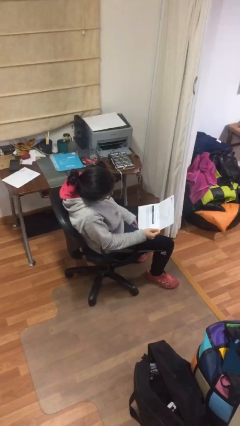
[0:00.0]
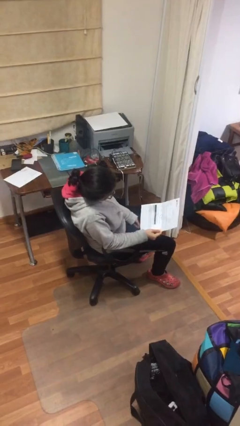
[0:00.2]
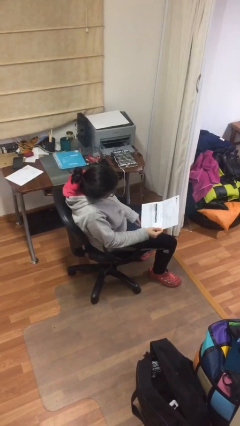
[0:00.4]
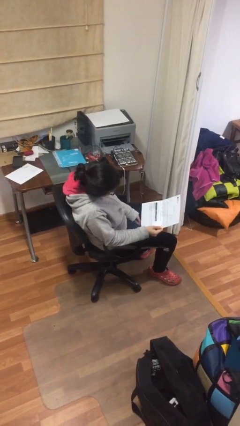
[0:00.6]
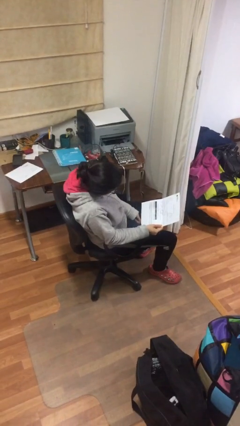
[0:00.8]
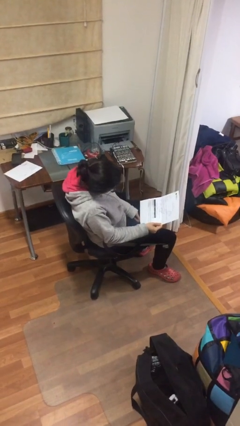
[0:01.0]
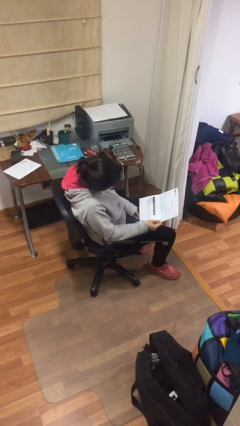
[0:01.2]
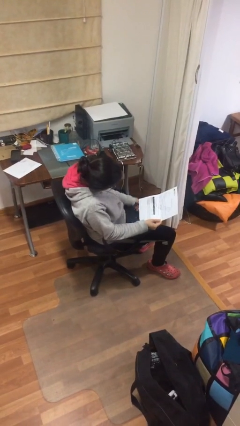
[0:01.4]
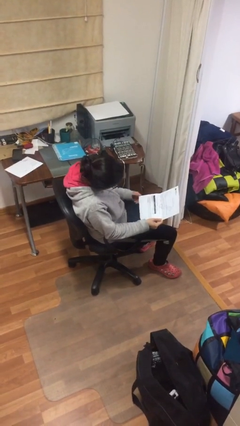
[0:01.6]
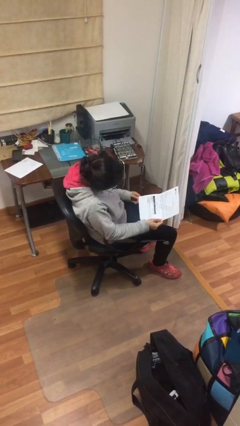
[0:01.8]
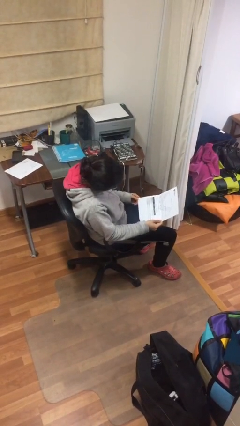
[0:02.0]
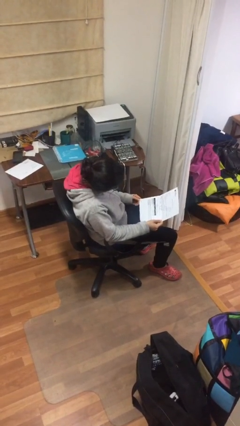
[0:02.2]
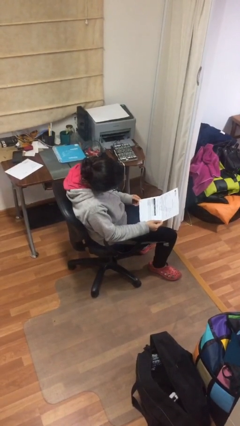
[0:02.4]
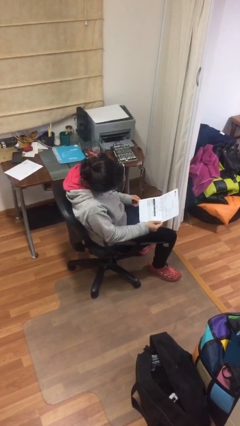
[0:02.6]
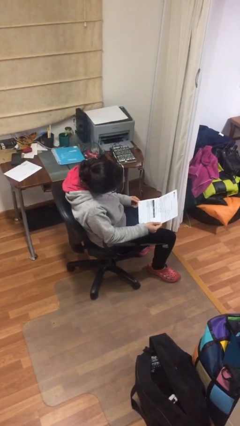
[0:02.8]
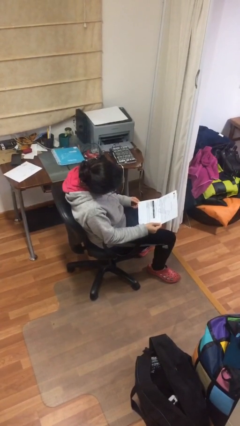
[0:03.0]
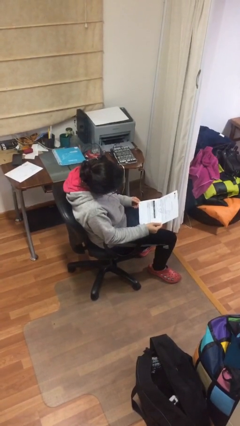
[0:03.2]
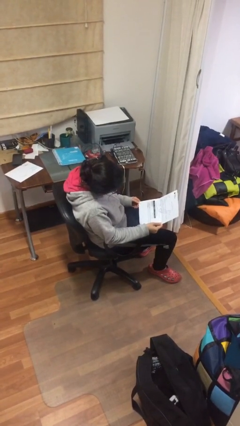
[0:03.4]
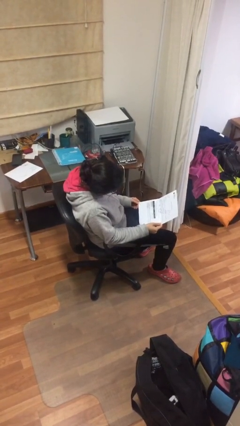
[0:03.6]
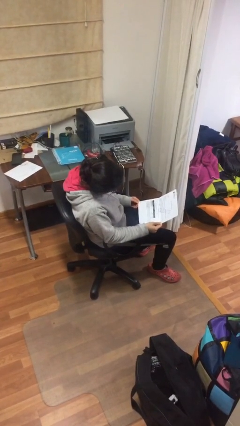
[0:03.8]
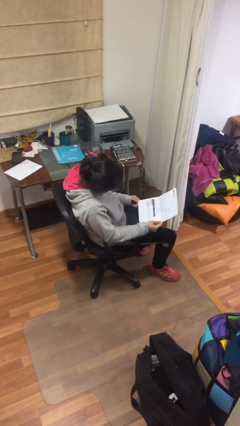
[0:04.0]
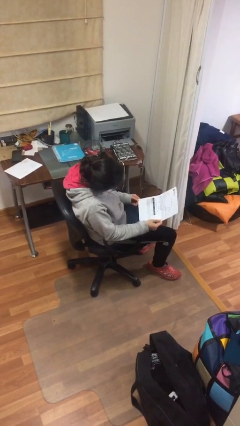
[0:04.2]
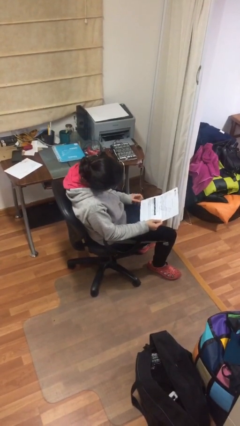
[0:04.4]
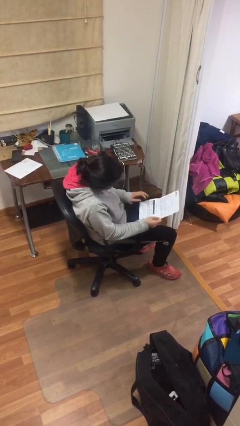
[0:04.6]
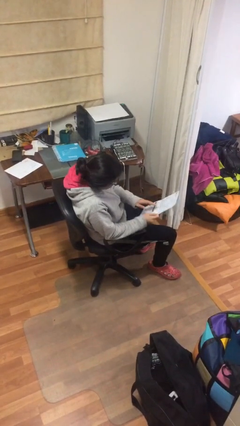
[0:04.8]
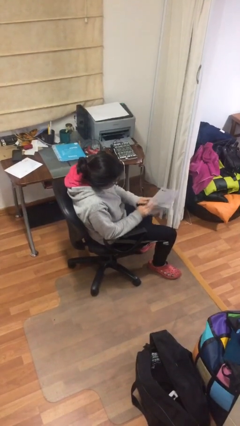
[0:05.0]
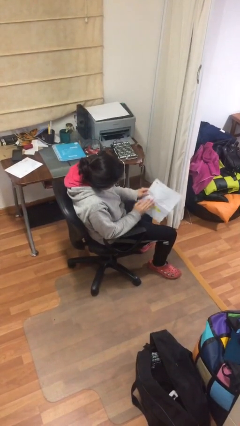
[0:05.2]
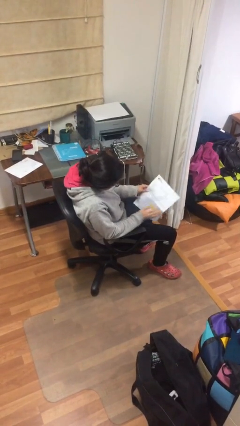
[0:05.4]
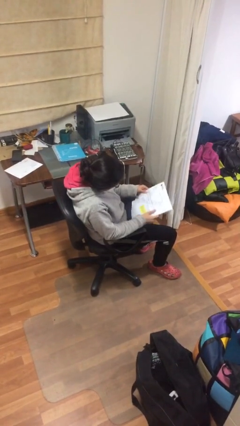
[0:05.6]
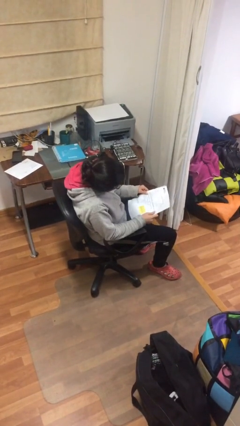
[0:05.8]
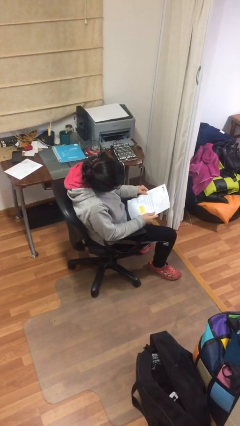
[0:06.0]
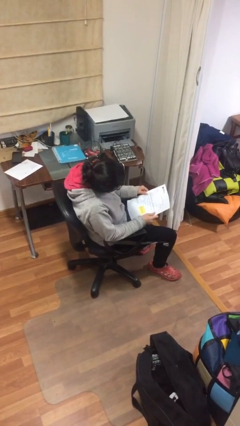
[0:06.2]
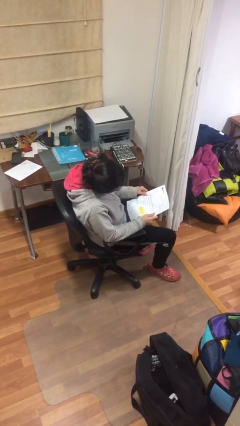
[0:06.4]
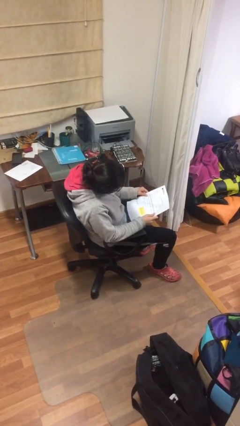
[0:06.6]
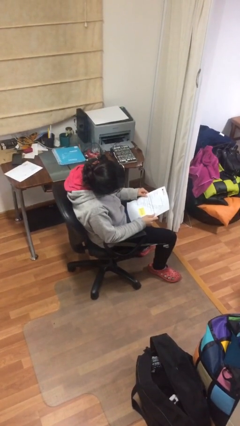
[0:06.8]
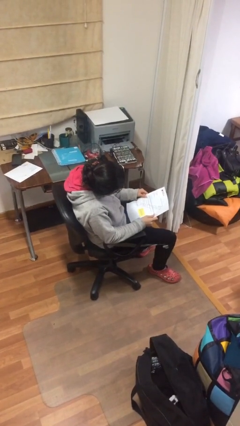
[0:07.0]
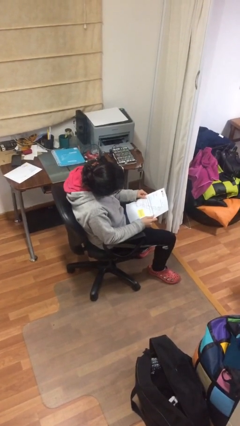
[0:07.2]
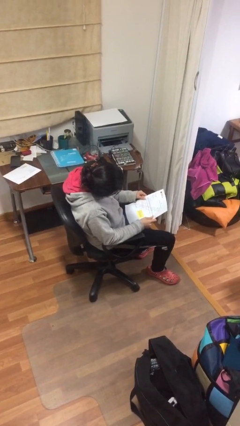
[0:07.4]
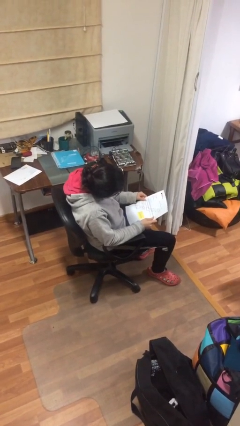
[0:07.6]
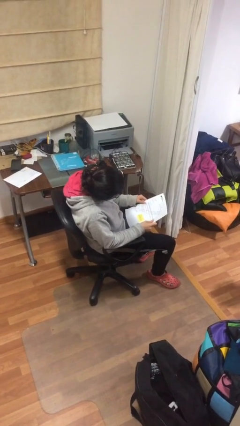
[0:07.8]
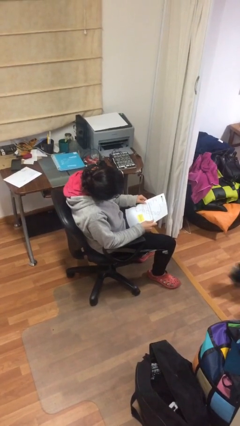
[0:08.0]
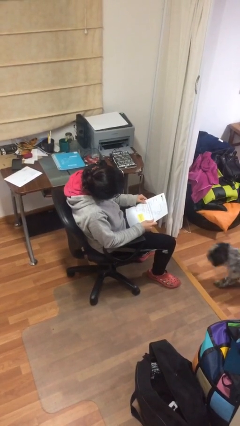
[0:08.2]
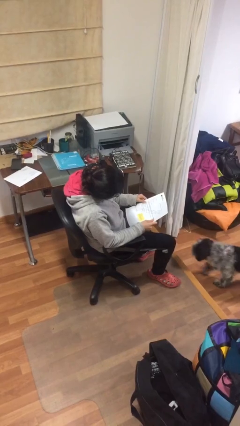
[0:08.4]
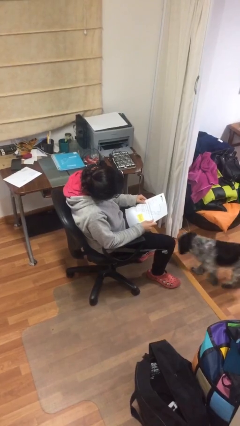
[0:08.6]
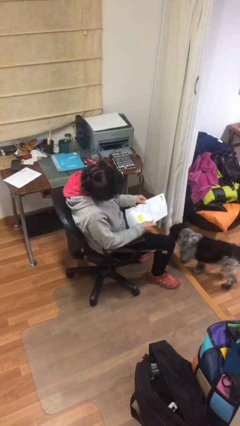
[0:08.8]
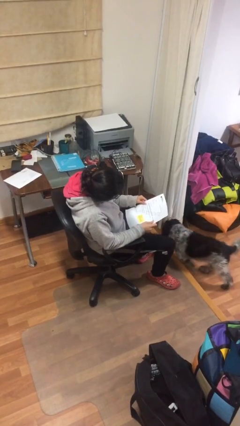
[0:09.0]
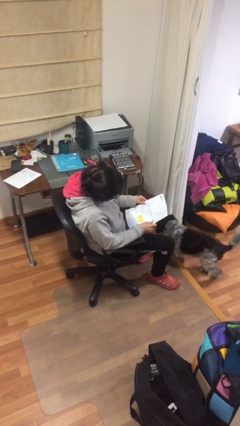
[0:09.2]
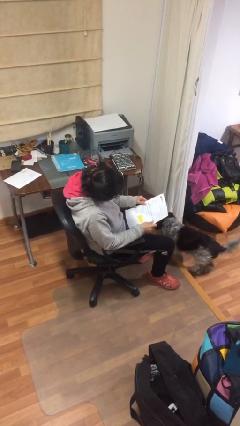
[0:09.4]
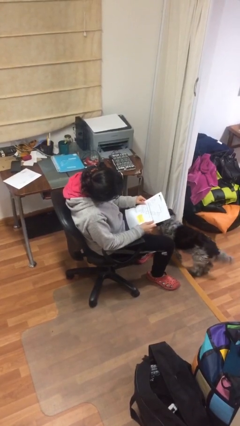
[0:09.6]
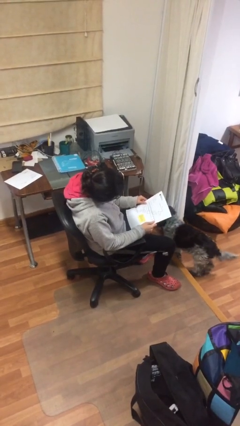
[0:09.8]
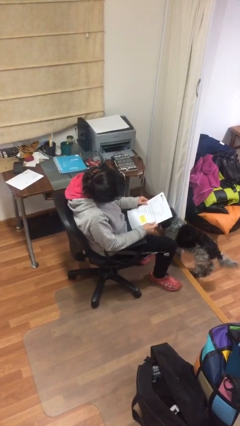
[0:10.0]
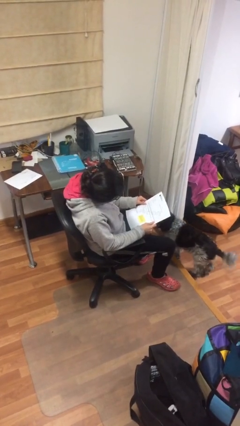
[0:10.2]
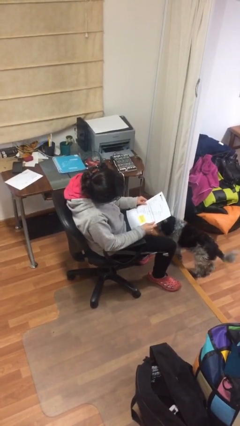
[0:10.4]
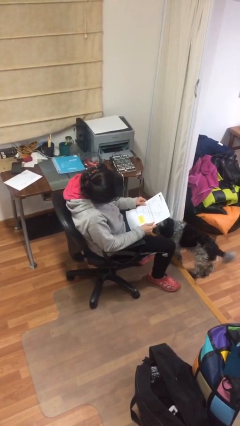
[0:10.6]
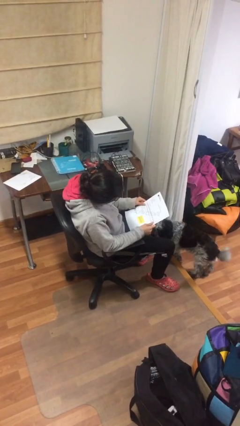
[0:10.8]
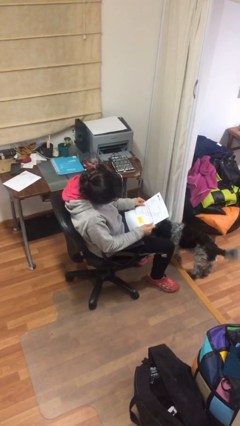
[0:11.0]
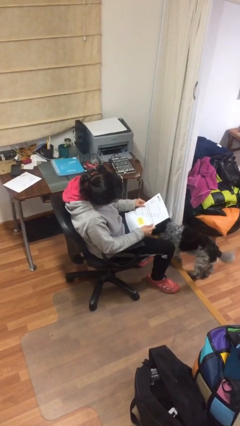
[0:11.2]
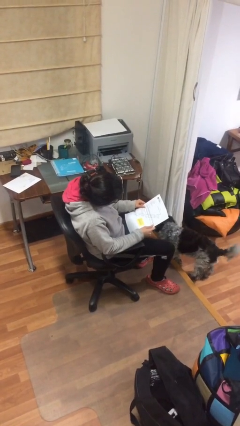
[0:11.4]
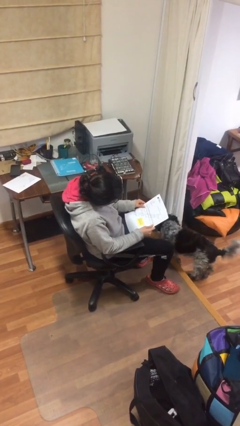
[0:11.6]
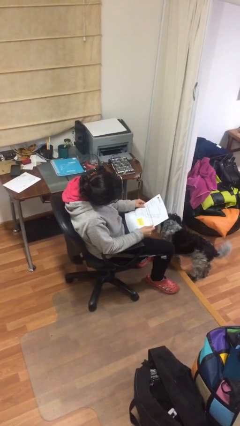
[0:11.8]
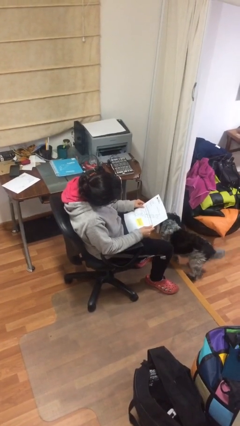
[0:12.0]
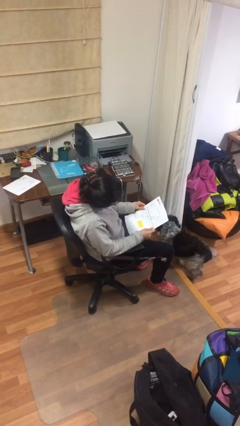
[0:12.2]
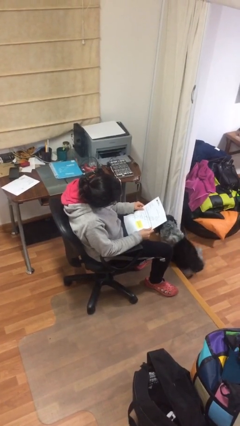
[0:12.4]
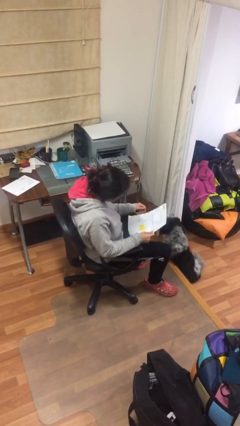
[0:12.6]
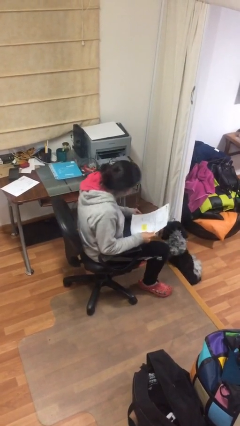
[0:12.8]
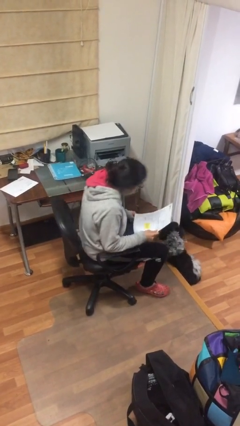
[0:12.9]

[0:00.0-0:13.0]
person reads document

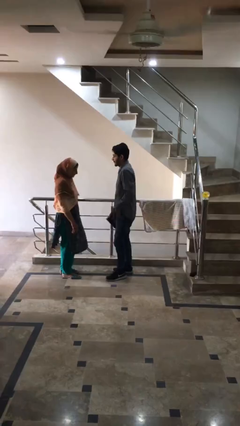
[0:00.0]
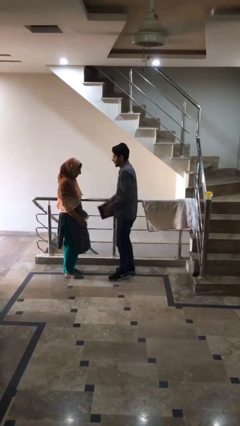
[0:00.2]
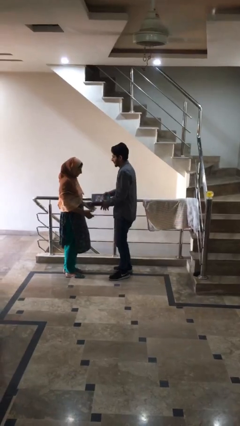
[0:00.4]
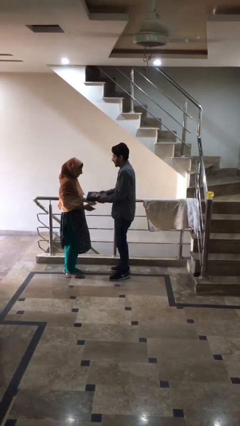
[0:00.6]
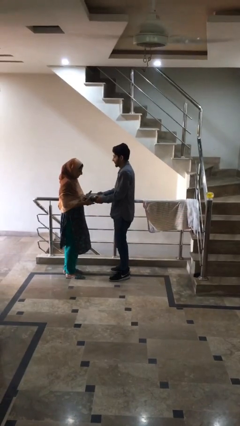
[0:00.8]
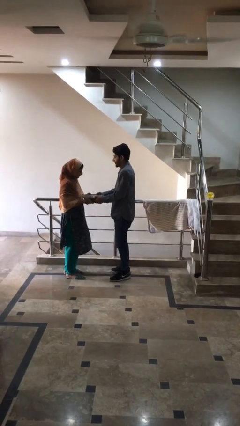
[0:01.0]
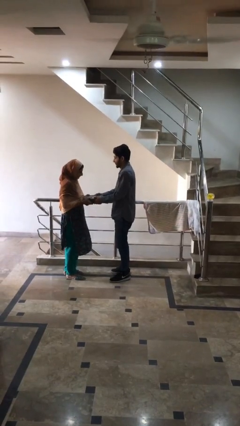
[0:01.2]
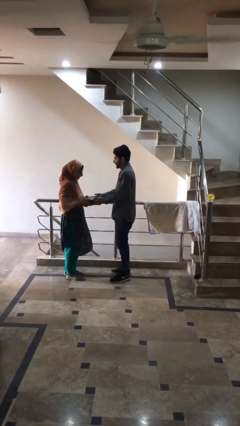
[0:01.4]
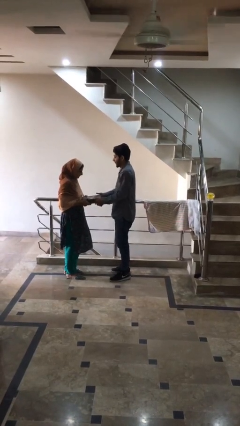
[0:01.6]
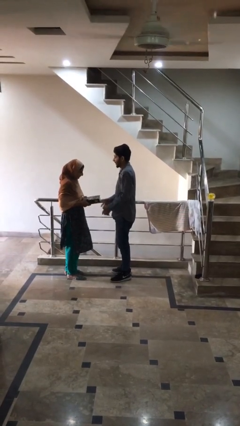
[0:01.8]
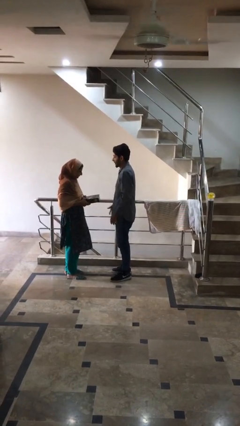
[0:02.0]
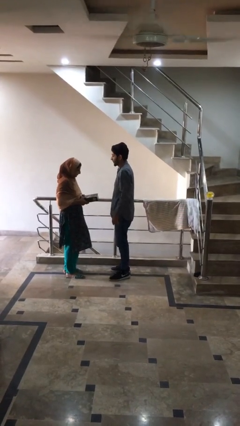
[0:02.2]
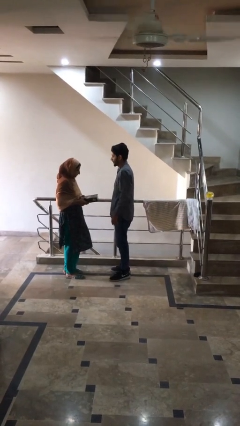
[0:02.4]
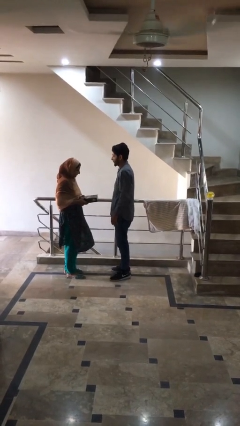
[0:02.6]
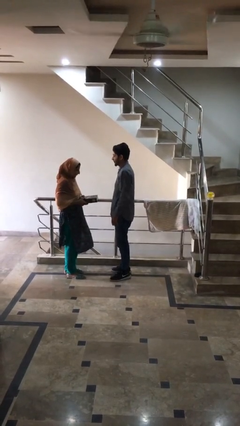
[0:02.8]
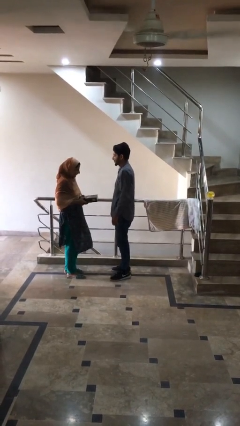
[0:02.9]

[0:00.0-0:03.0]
person transfers object to person

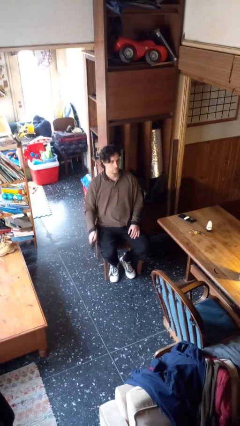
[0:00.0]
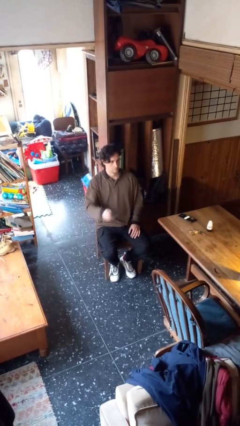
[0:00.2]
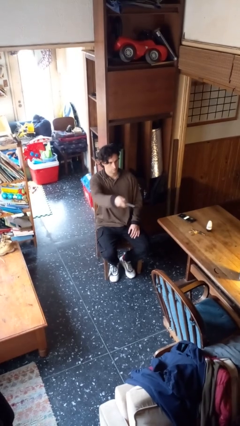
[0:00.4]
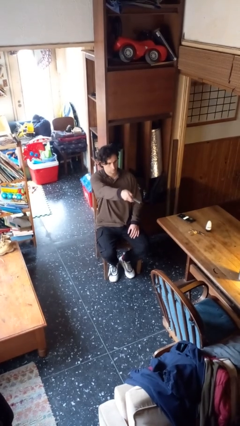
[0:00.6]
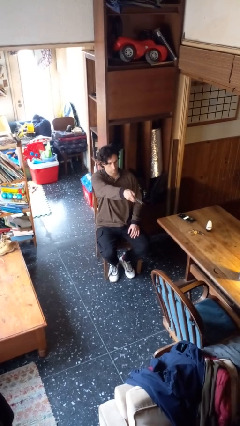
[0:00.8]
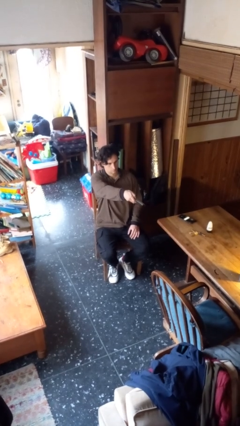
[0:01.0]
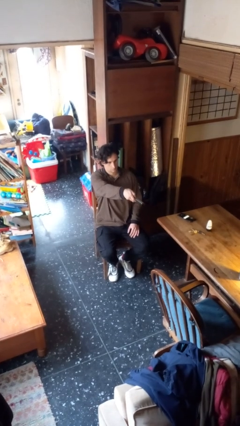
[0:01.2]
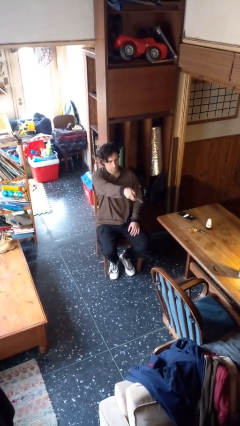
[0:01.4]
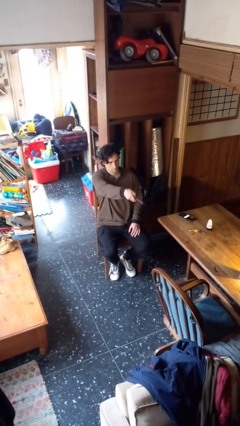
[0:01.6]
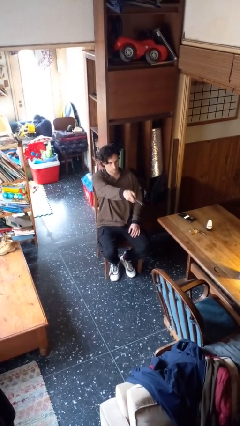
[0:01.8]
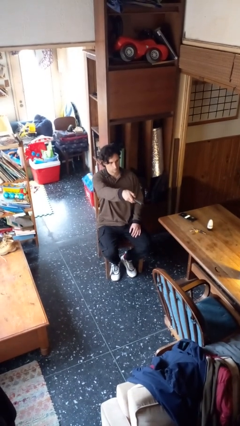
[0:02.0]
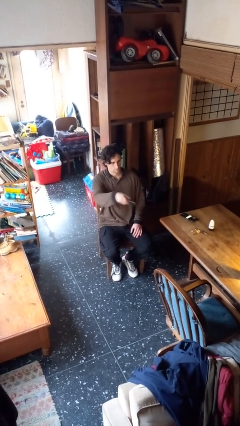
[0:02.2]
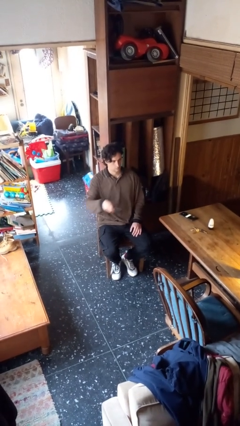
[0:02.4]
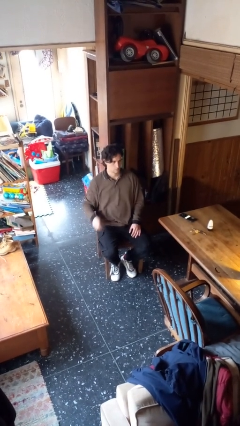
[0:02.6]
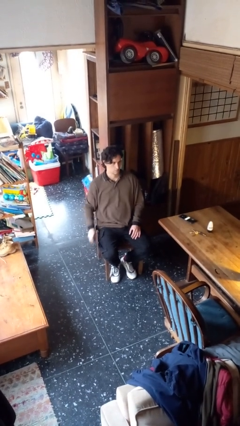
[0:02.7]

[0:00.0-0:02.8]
person uses television remote
